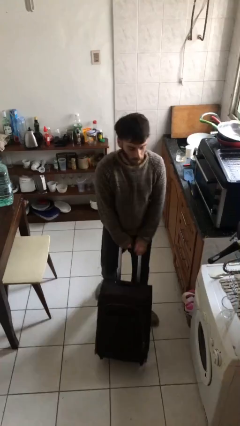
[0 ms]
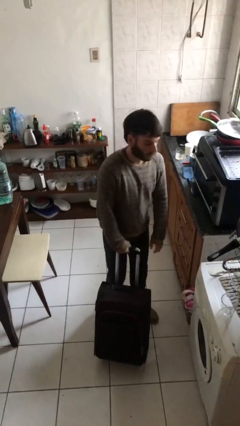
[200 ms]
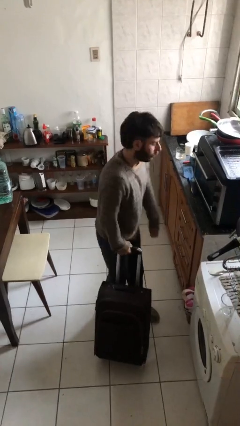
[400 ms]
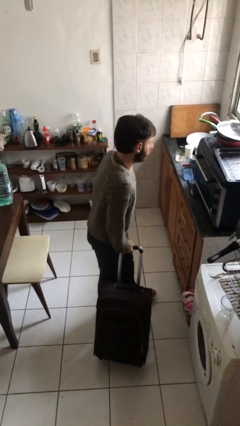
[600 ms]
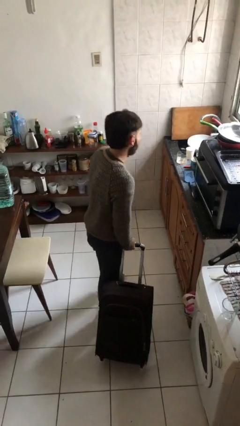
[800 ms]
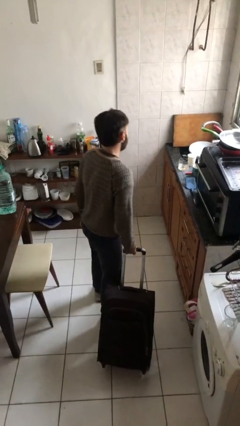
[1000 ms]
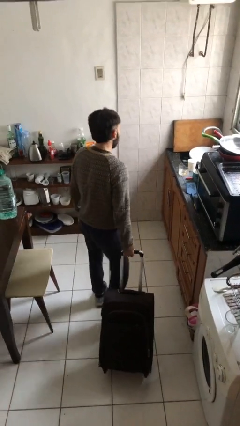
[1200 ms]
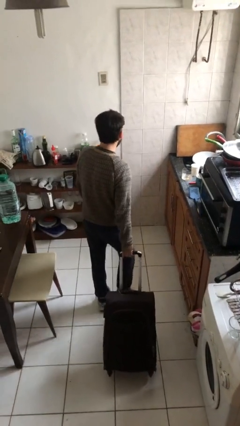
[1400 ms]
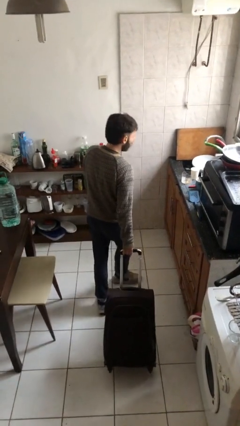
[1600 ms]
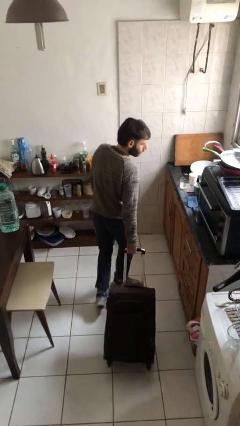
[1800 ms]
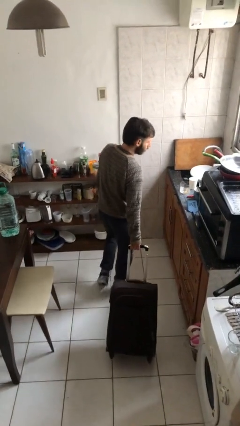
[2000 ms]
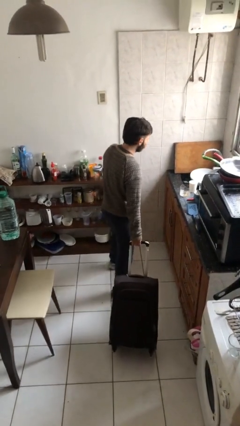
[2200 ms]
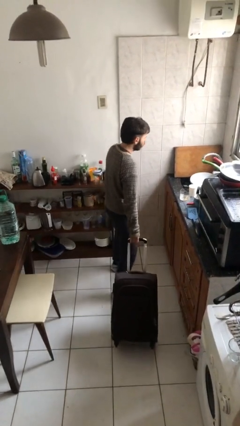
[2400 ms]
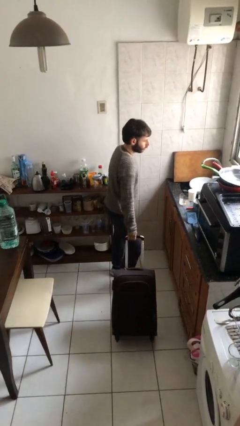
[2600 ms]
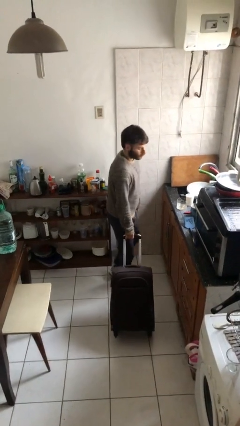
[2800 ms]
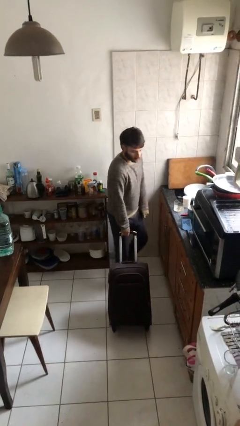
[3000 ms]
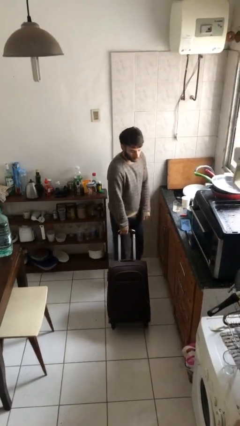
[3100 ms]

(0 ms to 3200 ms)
person pulls wheeled cart

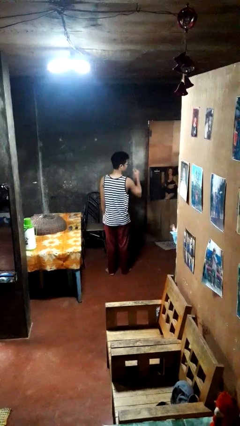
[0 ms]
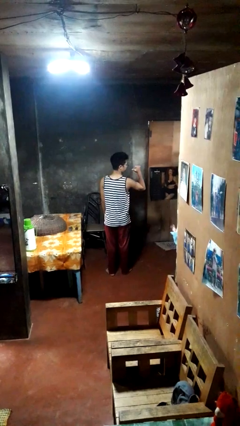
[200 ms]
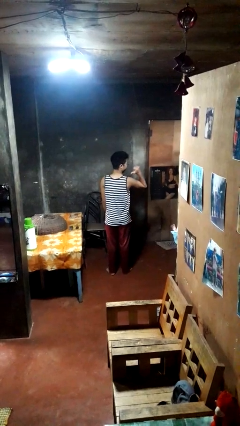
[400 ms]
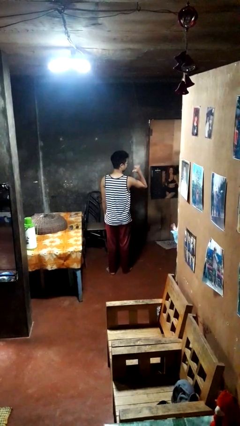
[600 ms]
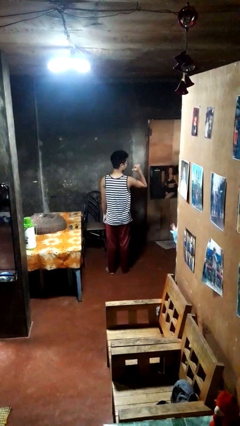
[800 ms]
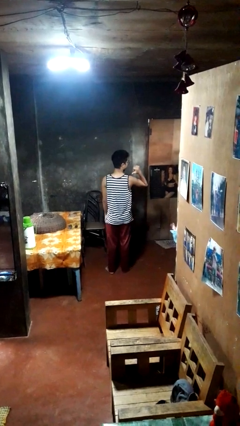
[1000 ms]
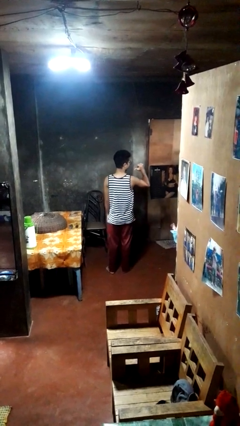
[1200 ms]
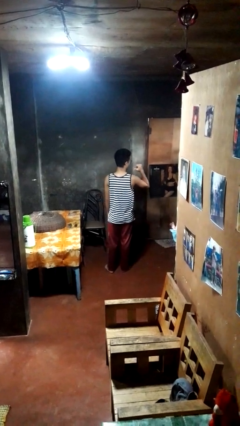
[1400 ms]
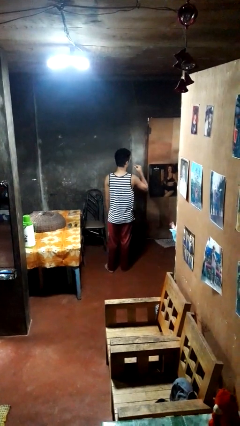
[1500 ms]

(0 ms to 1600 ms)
person gestures behind me

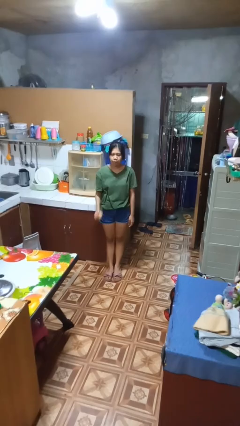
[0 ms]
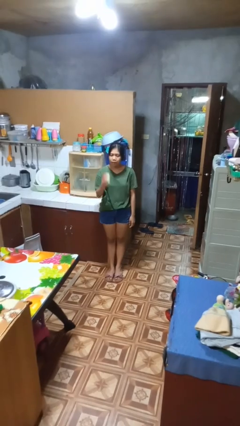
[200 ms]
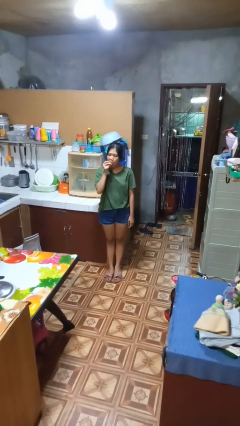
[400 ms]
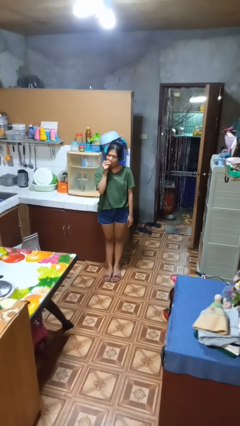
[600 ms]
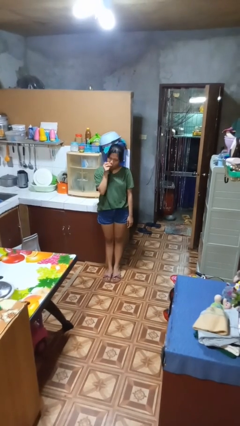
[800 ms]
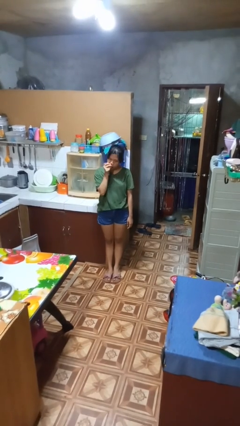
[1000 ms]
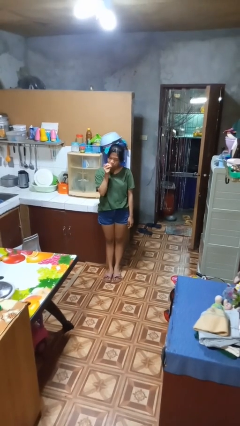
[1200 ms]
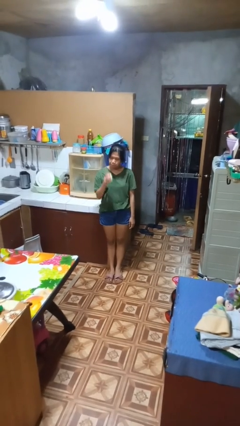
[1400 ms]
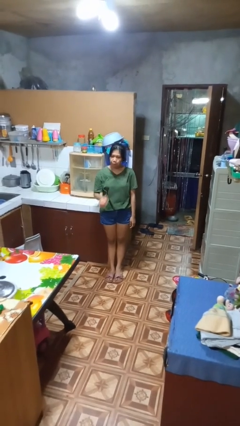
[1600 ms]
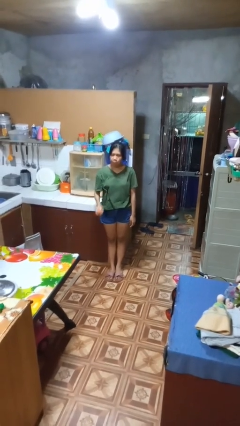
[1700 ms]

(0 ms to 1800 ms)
person eats apple

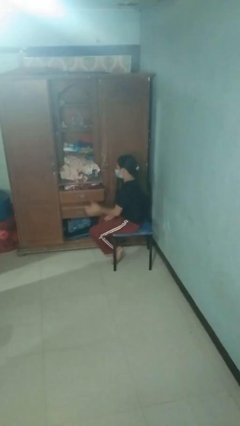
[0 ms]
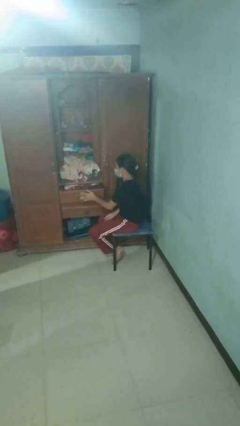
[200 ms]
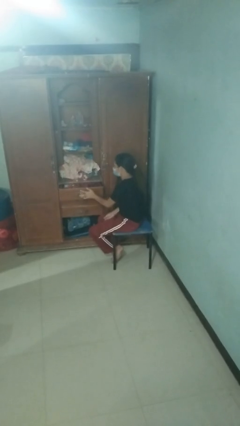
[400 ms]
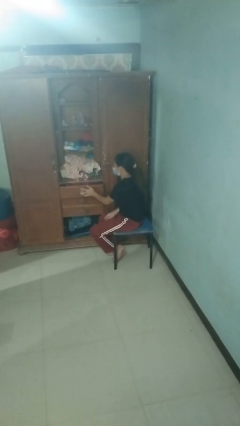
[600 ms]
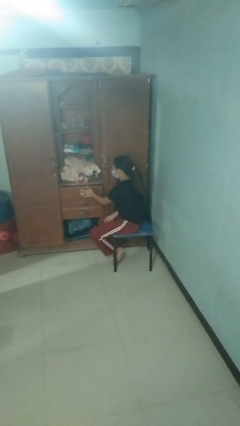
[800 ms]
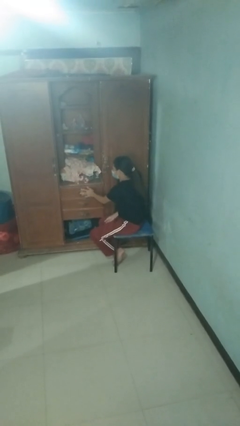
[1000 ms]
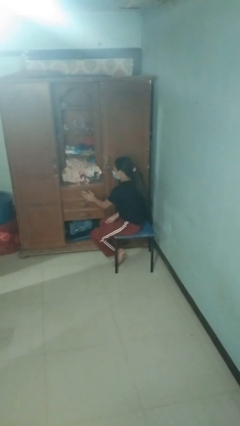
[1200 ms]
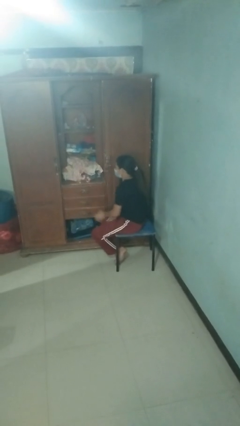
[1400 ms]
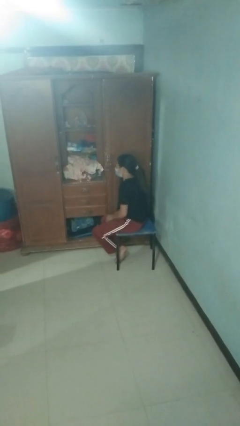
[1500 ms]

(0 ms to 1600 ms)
person closes dresser drawer

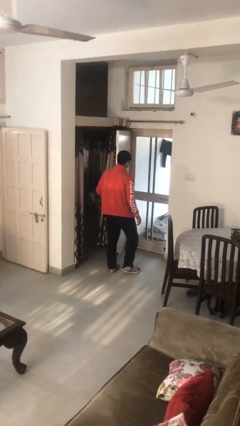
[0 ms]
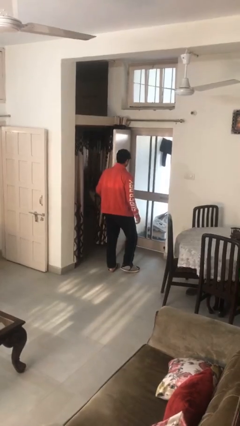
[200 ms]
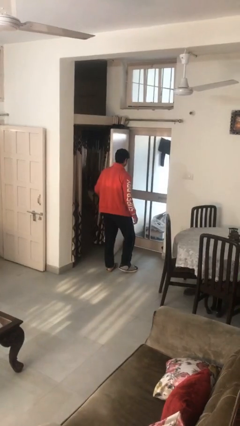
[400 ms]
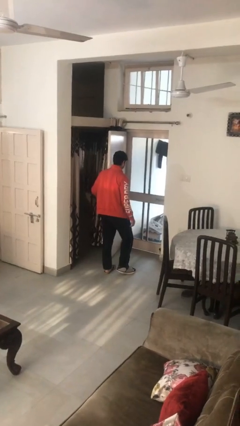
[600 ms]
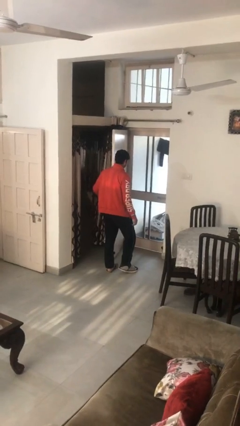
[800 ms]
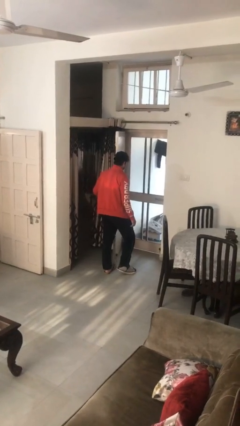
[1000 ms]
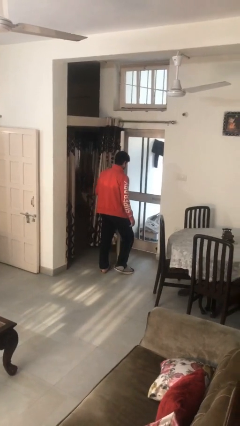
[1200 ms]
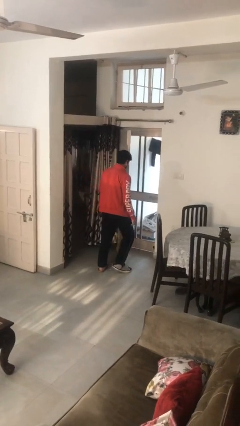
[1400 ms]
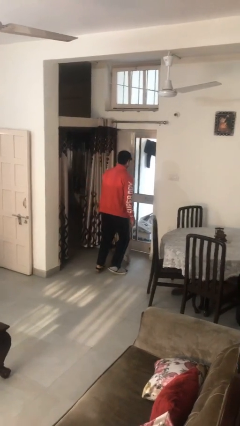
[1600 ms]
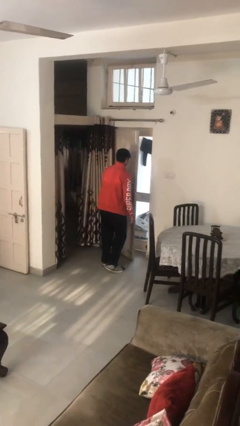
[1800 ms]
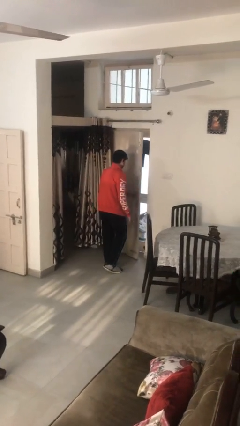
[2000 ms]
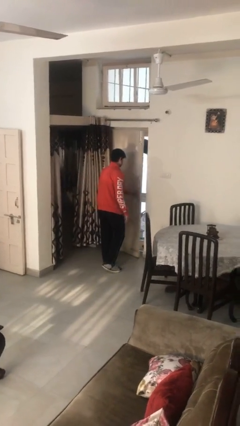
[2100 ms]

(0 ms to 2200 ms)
person closes facility door

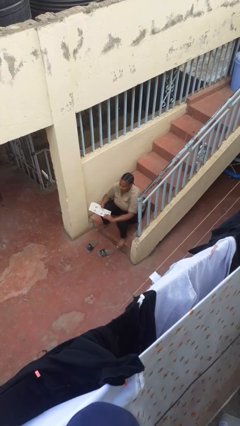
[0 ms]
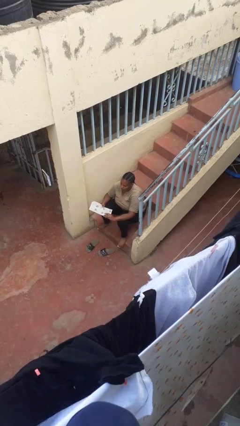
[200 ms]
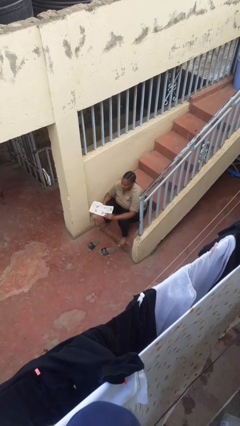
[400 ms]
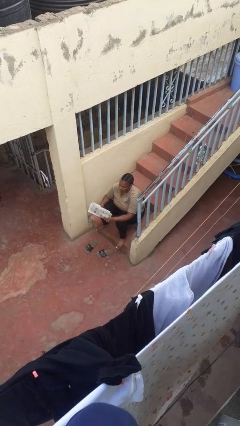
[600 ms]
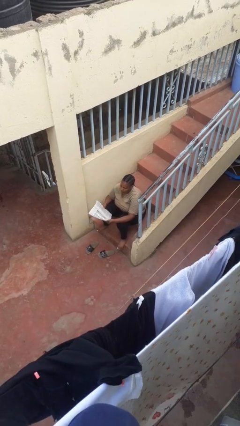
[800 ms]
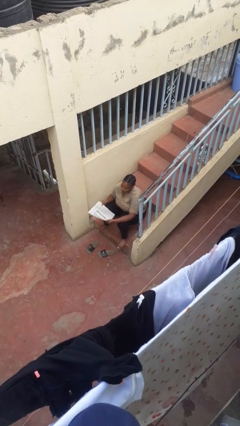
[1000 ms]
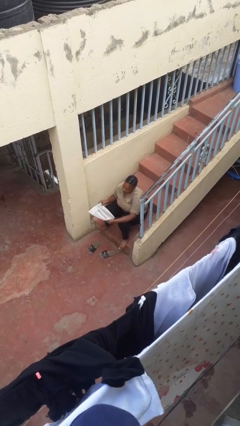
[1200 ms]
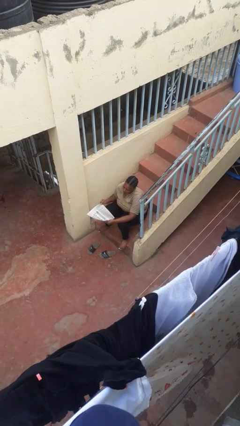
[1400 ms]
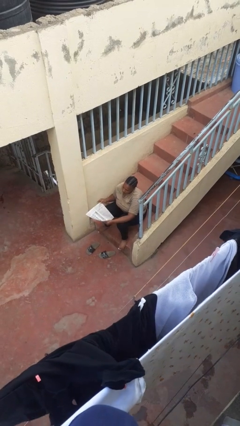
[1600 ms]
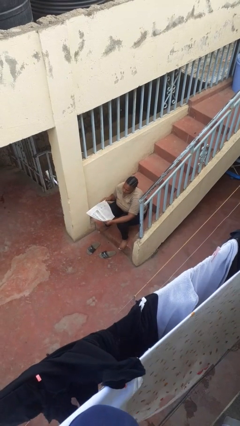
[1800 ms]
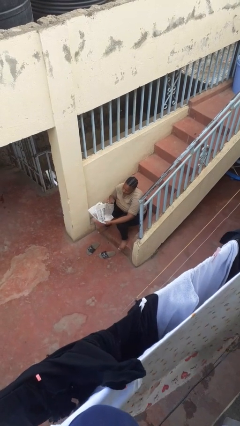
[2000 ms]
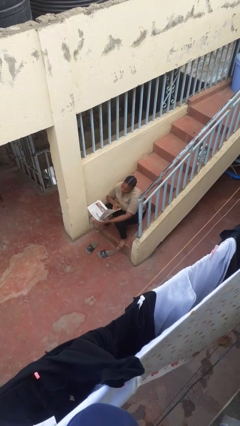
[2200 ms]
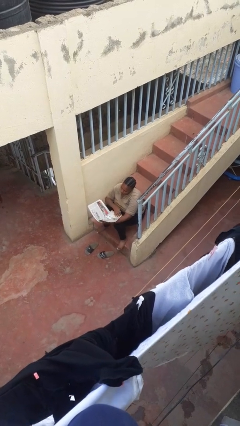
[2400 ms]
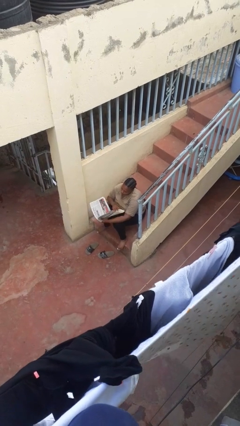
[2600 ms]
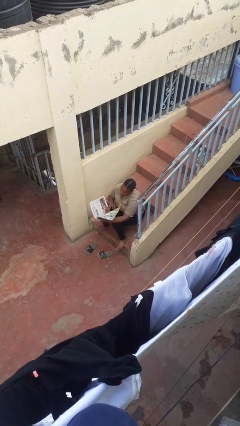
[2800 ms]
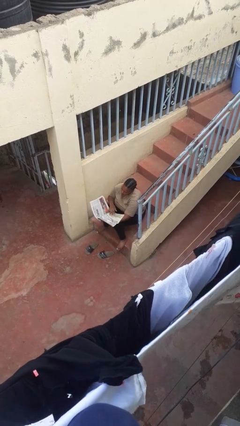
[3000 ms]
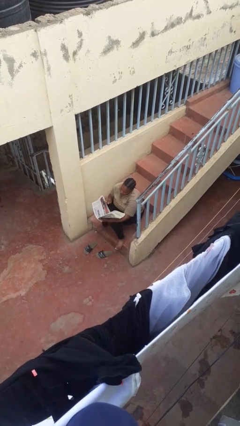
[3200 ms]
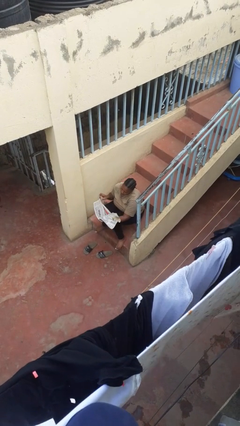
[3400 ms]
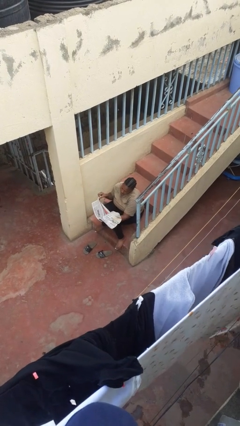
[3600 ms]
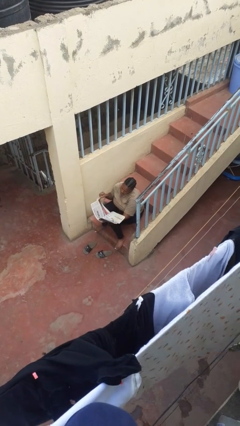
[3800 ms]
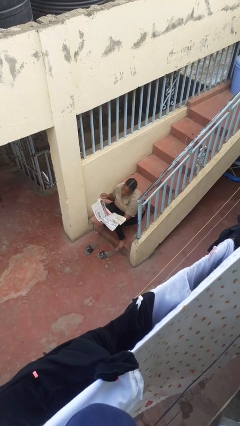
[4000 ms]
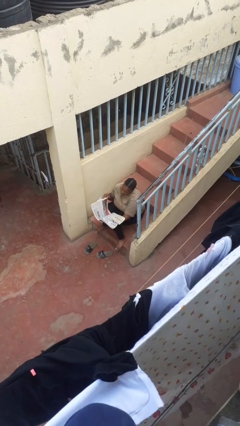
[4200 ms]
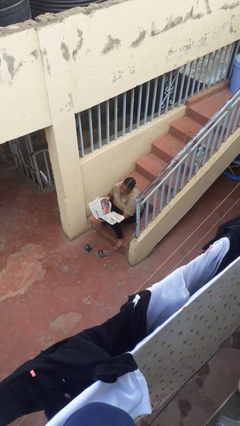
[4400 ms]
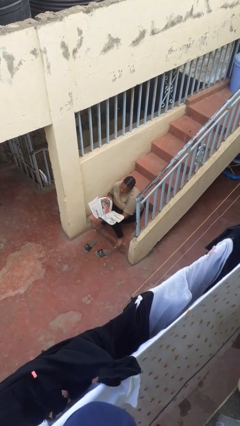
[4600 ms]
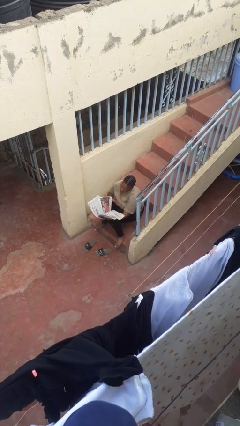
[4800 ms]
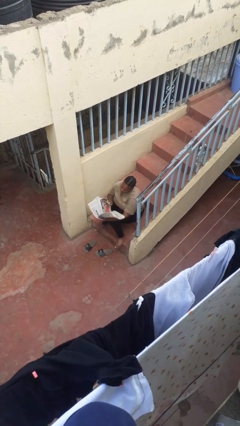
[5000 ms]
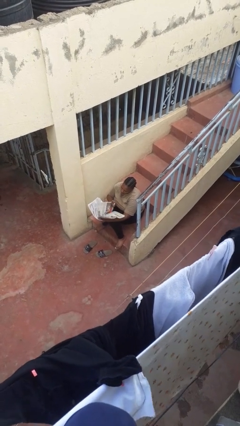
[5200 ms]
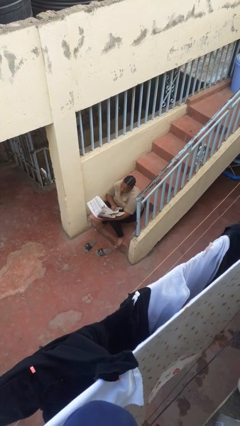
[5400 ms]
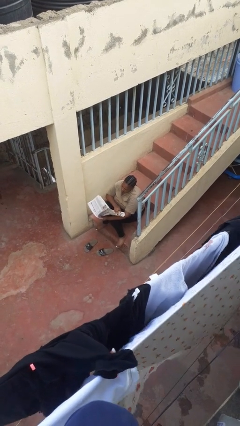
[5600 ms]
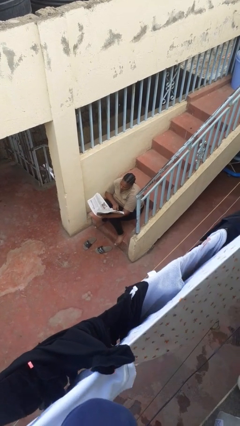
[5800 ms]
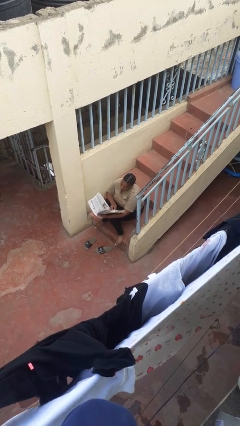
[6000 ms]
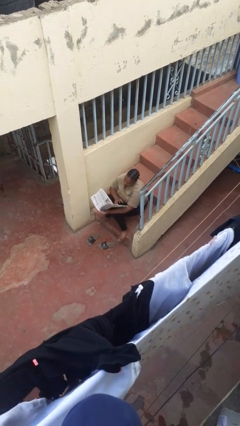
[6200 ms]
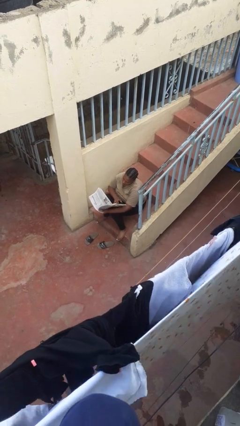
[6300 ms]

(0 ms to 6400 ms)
person reads newspaper

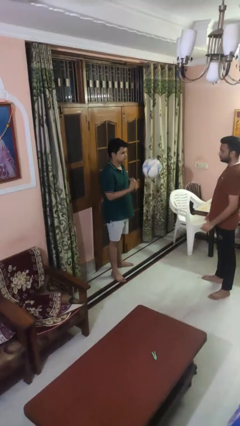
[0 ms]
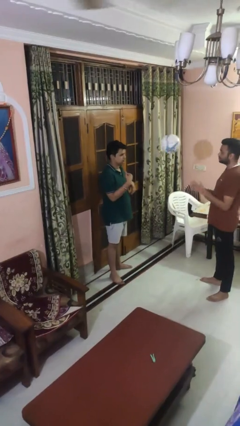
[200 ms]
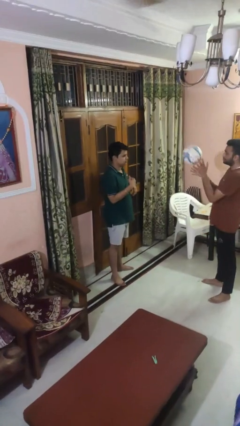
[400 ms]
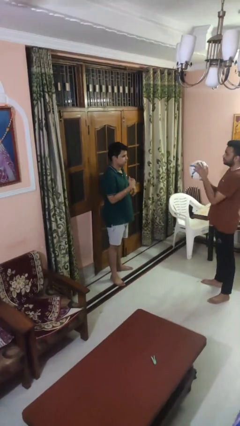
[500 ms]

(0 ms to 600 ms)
person throws object to person
